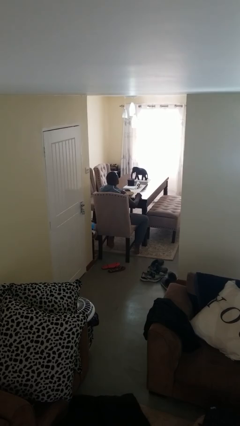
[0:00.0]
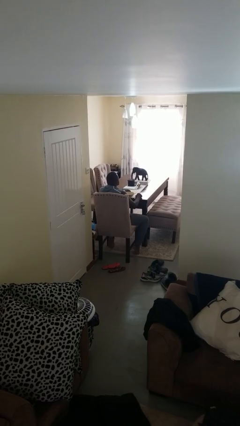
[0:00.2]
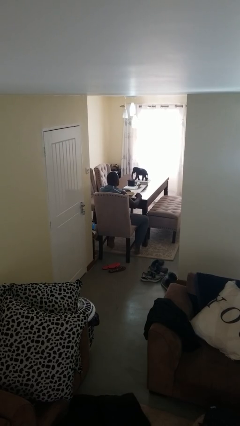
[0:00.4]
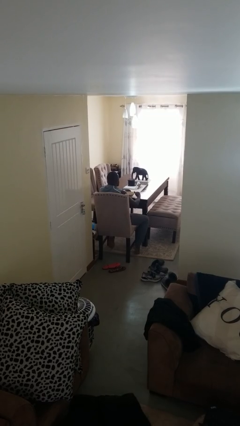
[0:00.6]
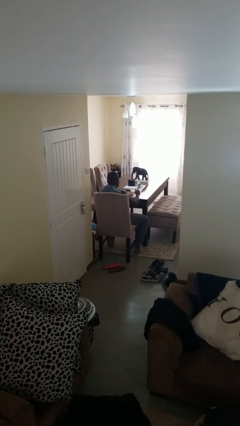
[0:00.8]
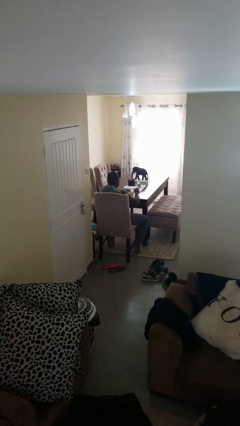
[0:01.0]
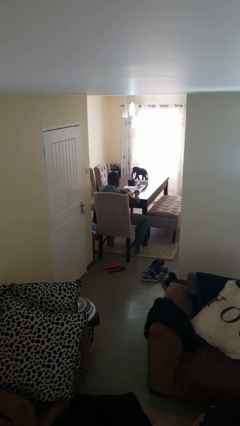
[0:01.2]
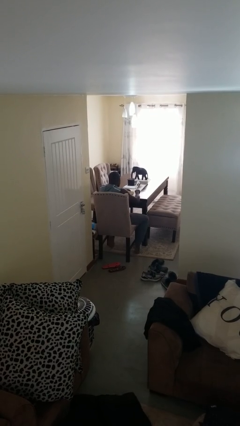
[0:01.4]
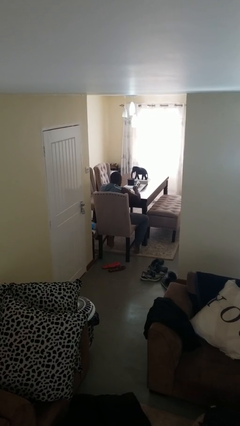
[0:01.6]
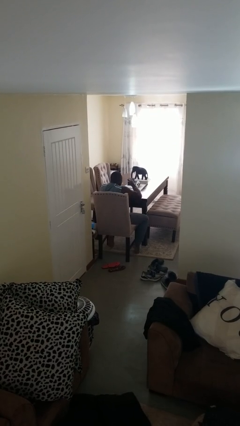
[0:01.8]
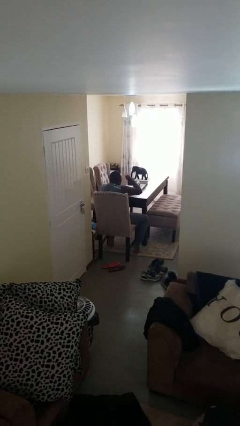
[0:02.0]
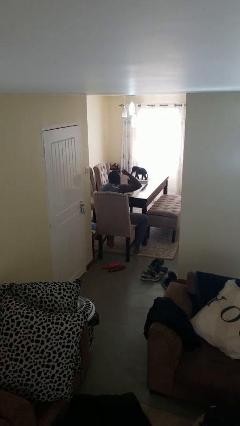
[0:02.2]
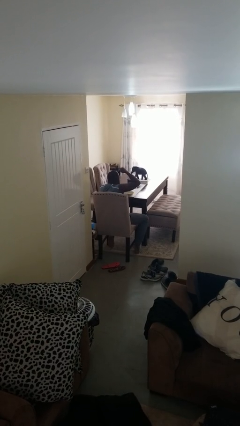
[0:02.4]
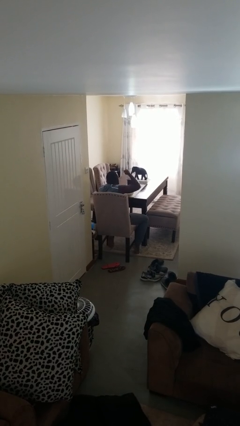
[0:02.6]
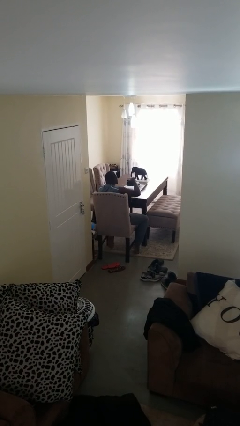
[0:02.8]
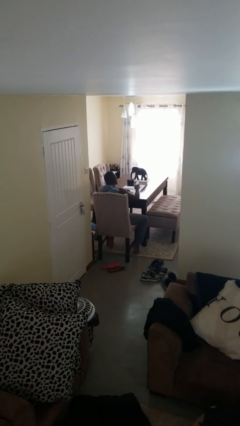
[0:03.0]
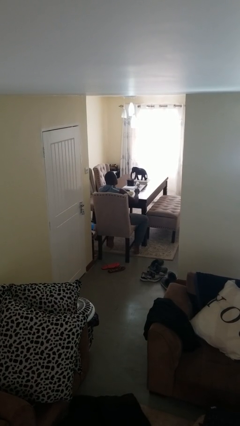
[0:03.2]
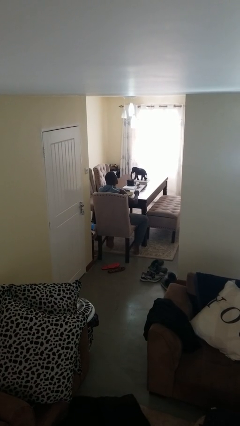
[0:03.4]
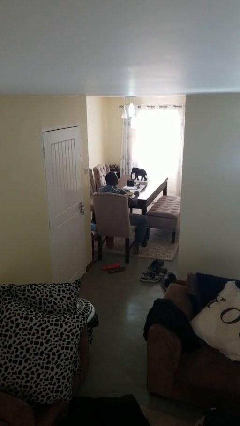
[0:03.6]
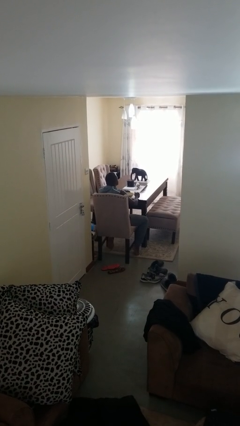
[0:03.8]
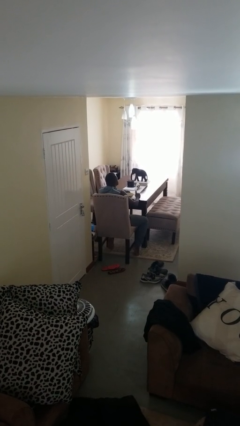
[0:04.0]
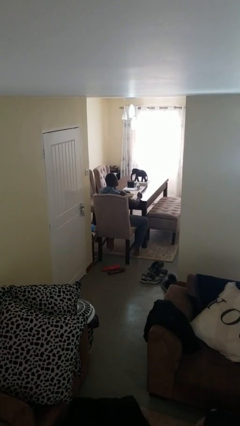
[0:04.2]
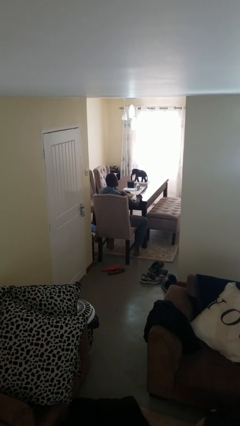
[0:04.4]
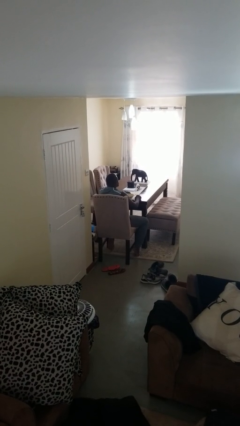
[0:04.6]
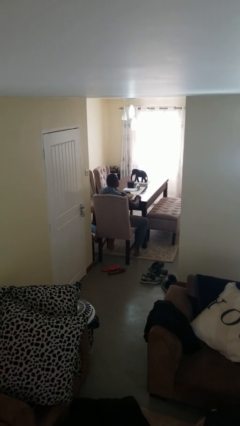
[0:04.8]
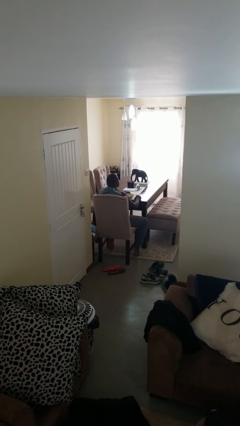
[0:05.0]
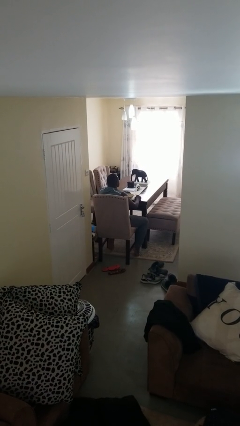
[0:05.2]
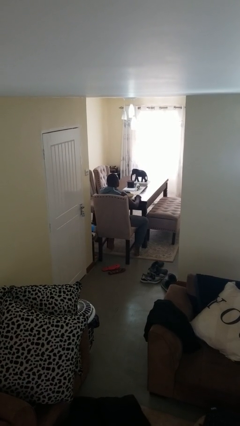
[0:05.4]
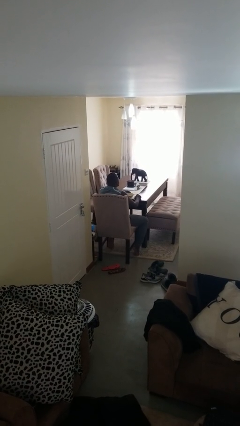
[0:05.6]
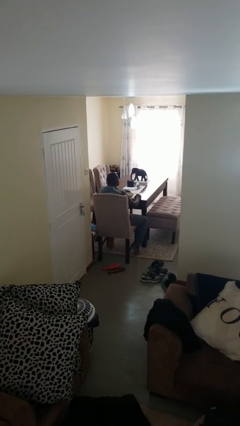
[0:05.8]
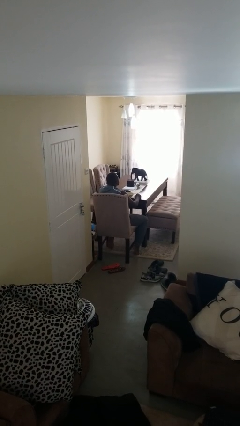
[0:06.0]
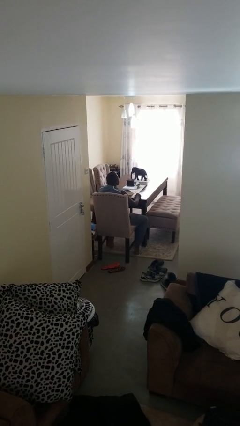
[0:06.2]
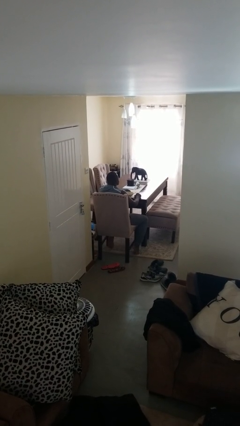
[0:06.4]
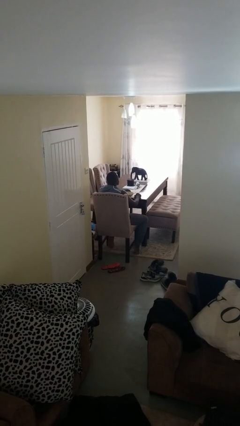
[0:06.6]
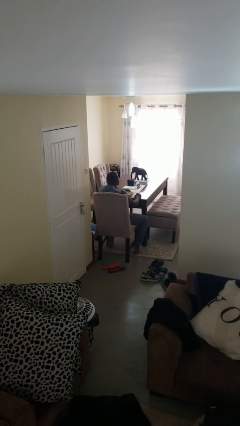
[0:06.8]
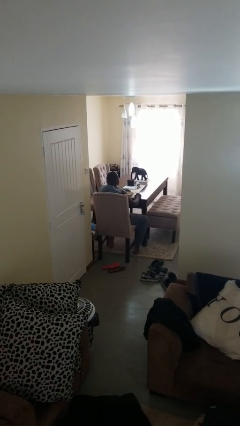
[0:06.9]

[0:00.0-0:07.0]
person eats with utensil

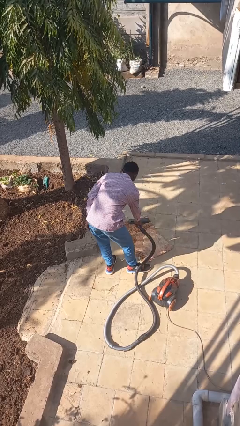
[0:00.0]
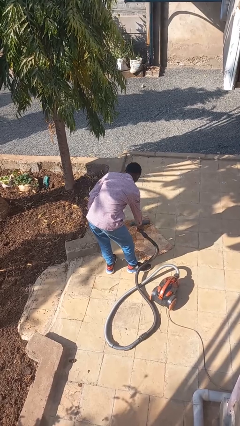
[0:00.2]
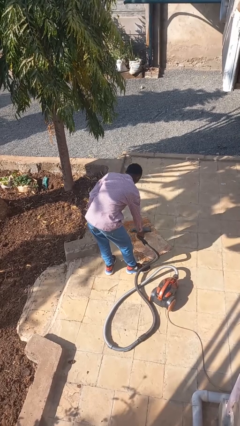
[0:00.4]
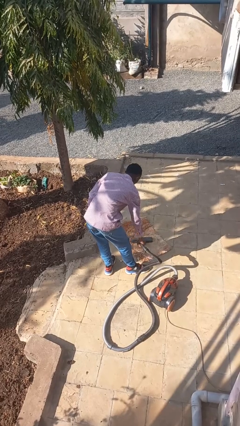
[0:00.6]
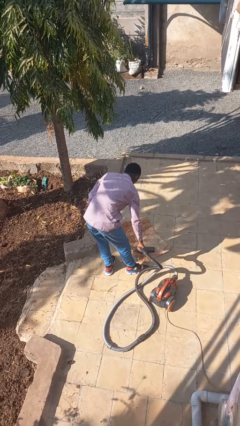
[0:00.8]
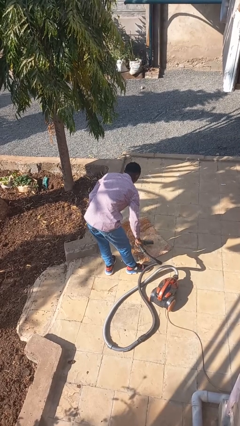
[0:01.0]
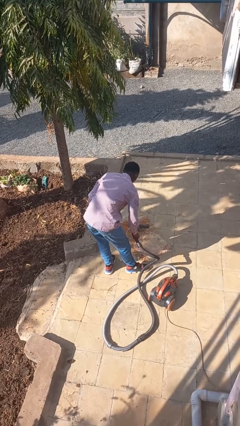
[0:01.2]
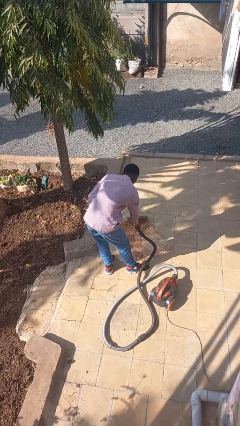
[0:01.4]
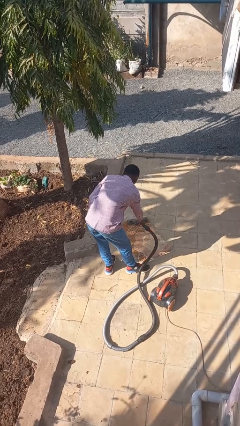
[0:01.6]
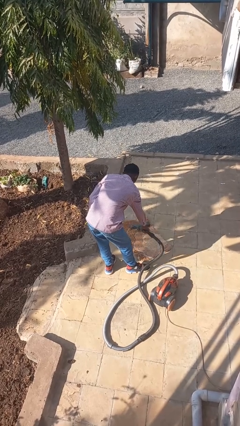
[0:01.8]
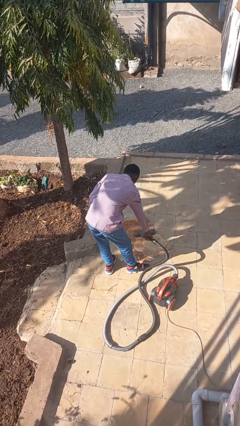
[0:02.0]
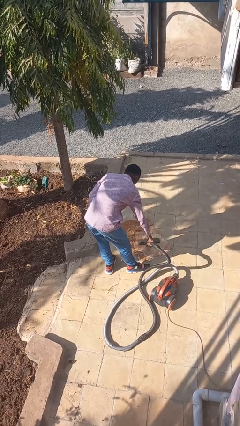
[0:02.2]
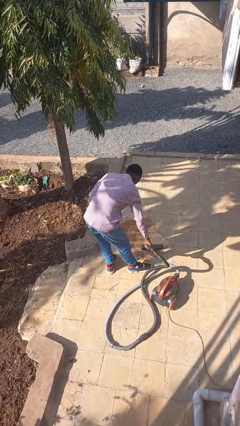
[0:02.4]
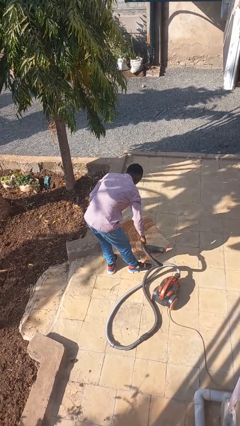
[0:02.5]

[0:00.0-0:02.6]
person vacuums carpet

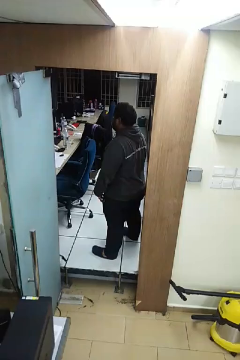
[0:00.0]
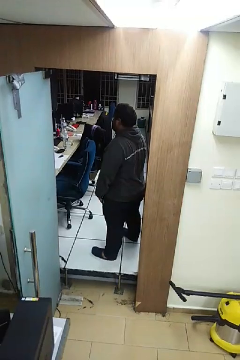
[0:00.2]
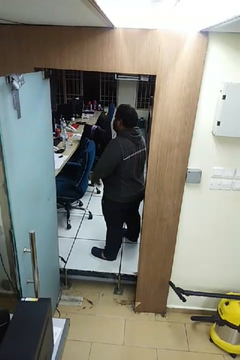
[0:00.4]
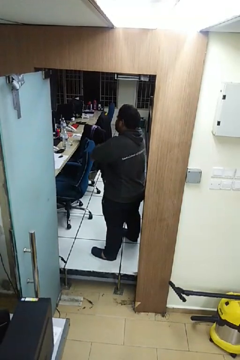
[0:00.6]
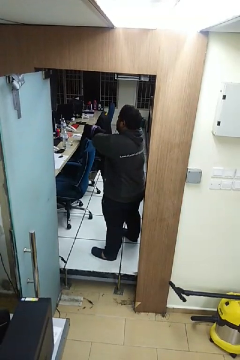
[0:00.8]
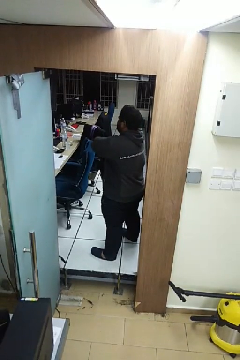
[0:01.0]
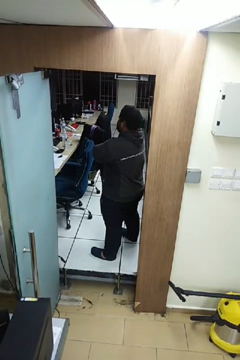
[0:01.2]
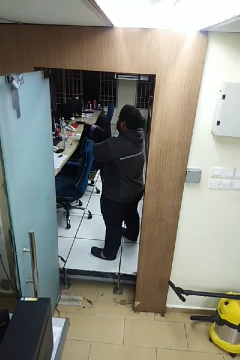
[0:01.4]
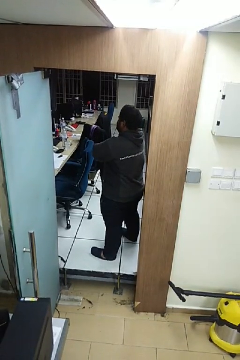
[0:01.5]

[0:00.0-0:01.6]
person crosses arms

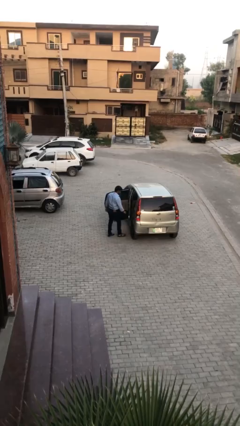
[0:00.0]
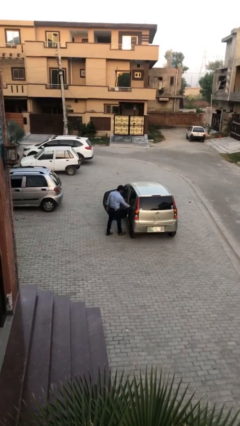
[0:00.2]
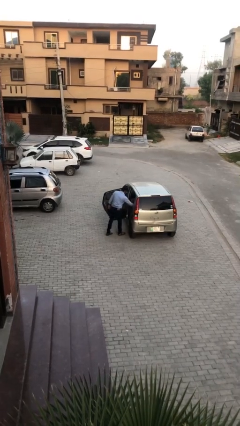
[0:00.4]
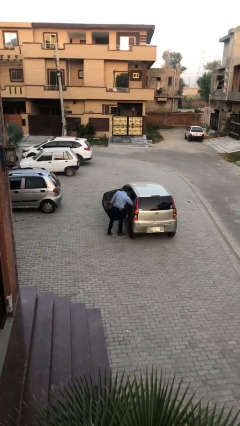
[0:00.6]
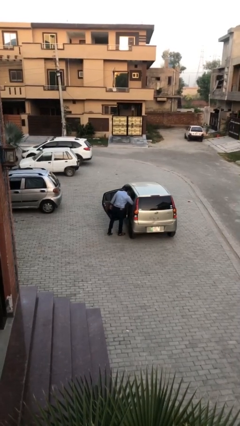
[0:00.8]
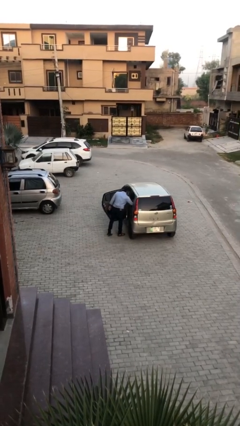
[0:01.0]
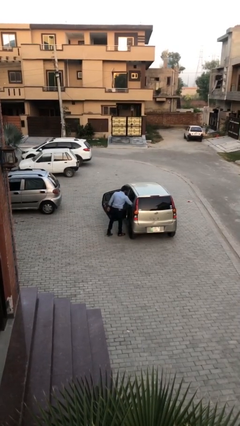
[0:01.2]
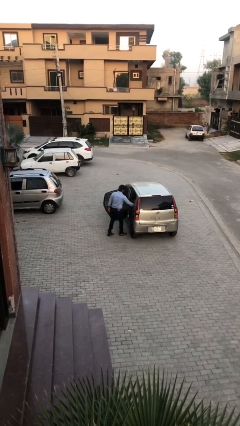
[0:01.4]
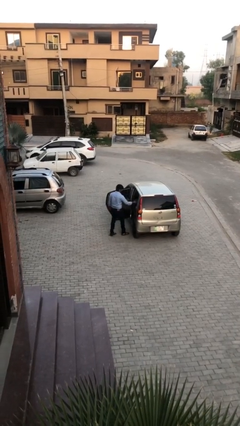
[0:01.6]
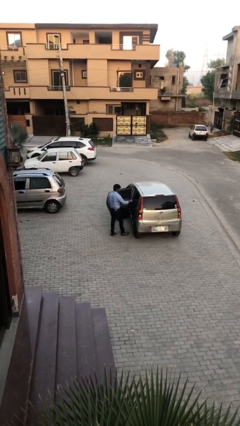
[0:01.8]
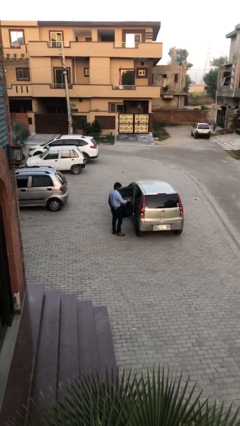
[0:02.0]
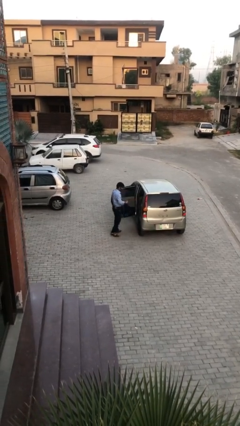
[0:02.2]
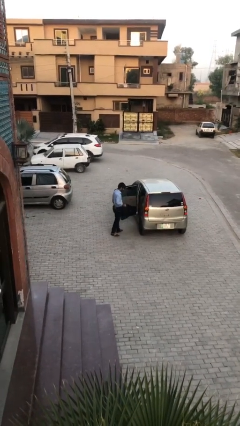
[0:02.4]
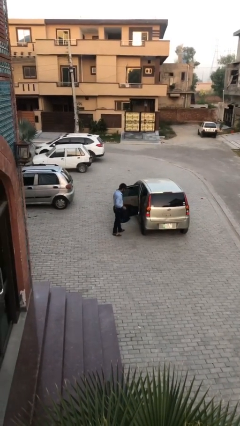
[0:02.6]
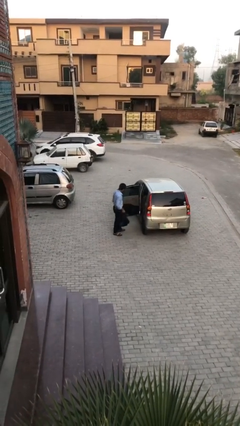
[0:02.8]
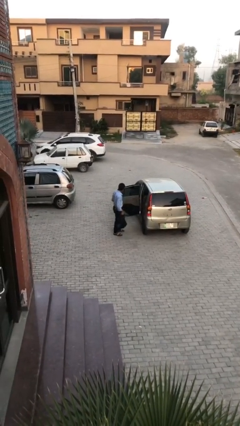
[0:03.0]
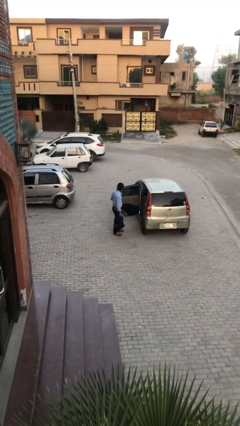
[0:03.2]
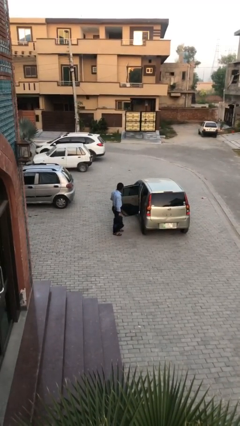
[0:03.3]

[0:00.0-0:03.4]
person unloads car

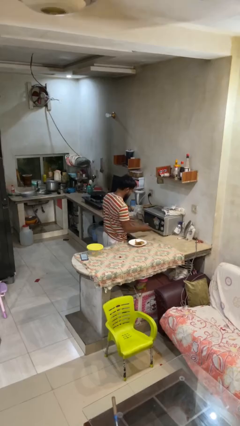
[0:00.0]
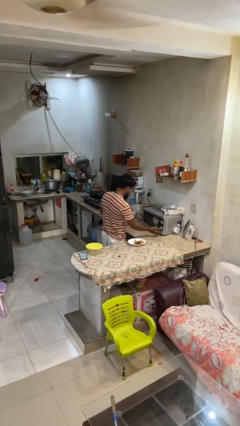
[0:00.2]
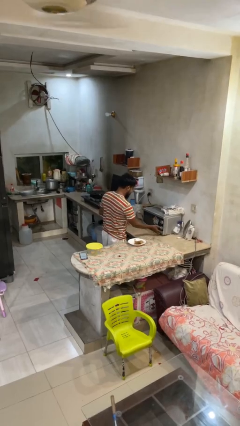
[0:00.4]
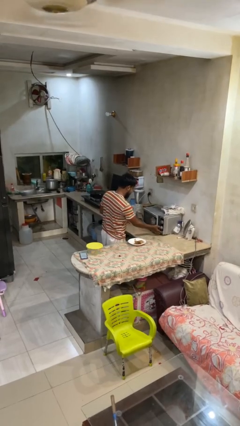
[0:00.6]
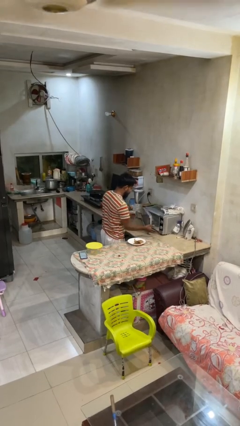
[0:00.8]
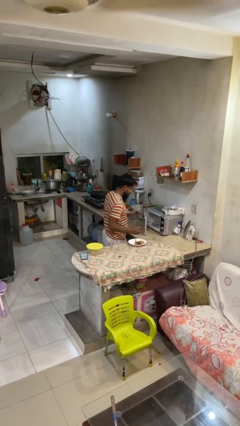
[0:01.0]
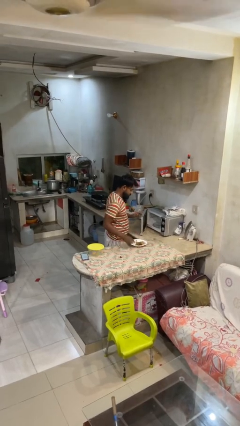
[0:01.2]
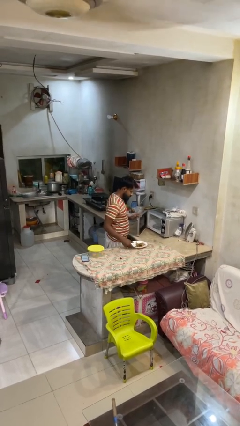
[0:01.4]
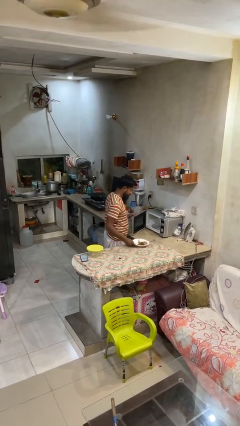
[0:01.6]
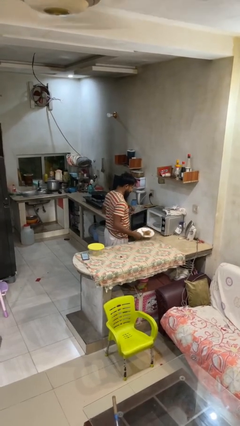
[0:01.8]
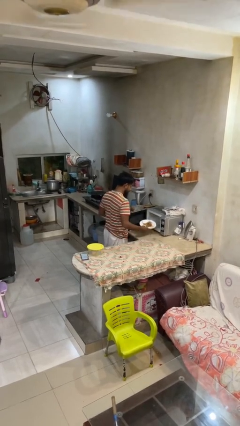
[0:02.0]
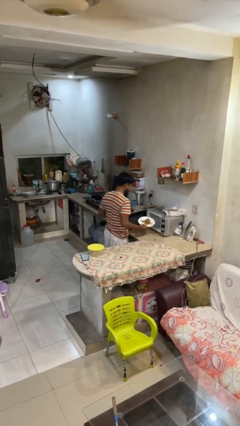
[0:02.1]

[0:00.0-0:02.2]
person opens microwave

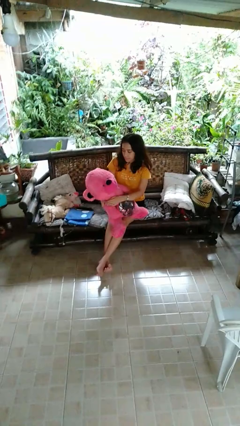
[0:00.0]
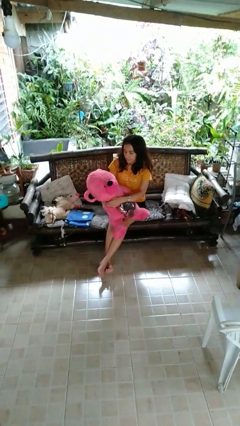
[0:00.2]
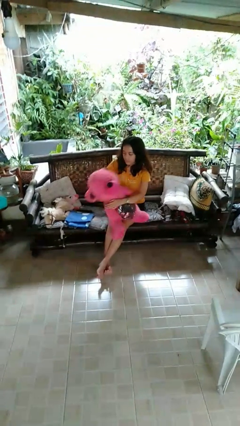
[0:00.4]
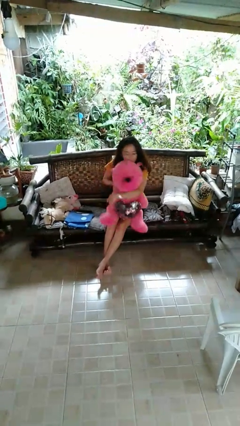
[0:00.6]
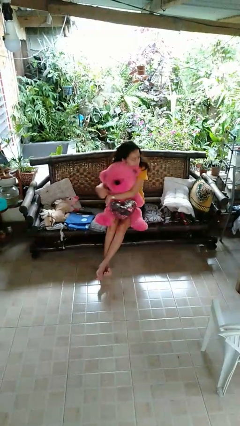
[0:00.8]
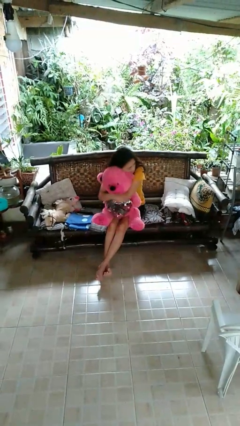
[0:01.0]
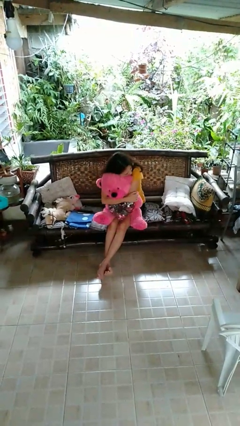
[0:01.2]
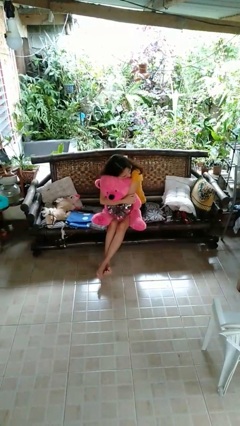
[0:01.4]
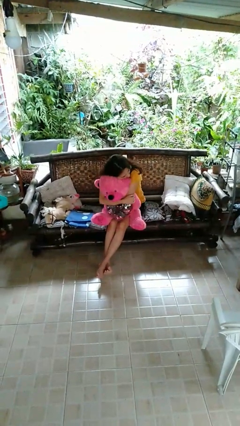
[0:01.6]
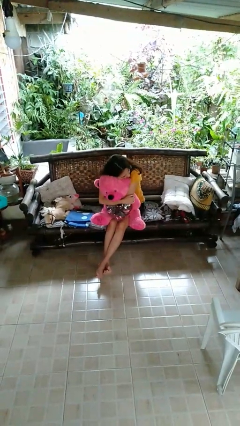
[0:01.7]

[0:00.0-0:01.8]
person hugs stuffed animal
